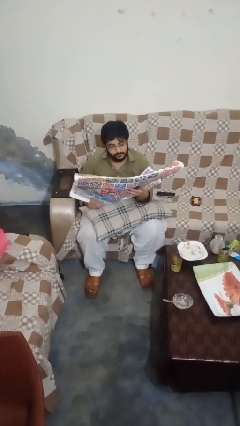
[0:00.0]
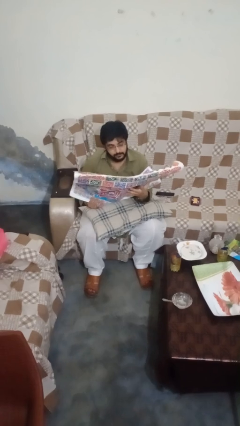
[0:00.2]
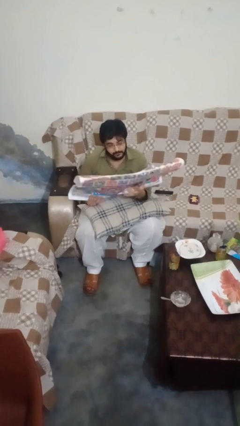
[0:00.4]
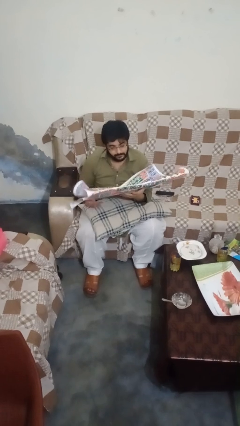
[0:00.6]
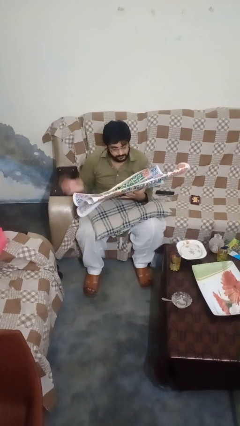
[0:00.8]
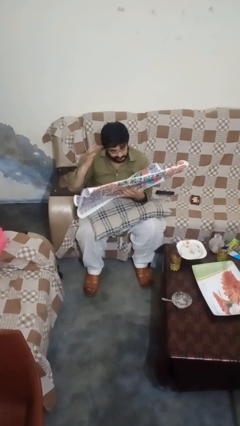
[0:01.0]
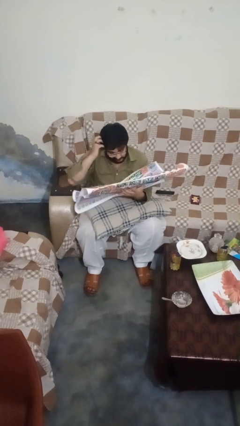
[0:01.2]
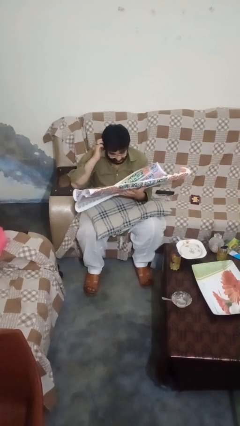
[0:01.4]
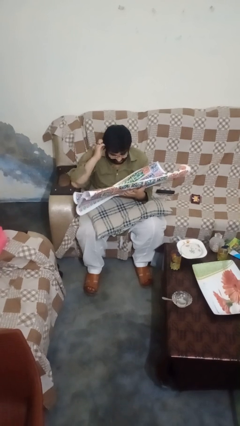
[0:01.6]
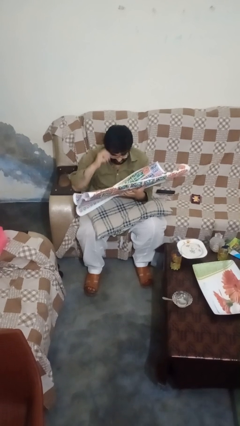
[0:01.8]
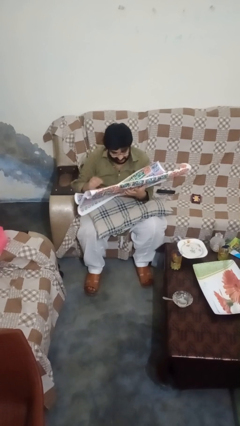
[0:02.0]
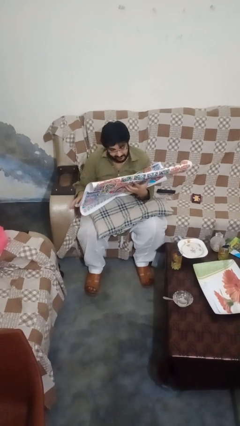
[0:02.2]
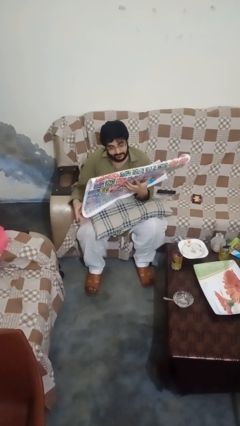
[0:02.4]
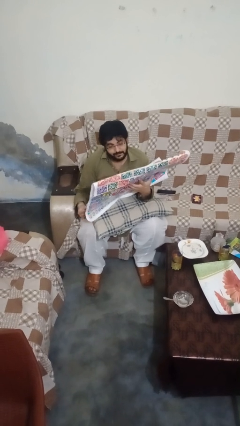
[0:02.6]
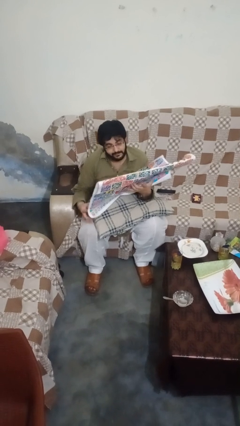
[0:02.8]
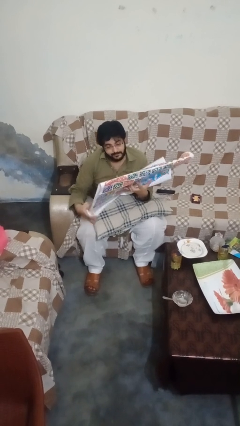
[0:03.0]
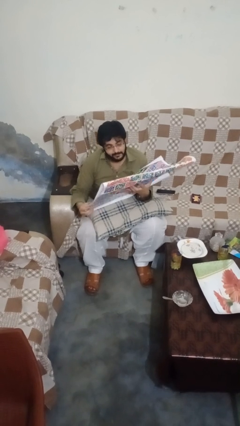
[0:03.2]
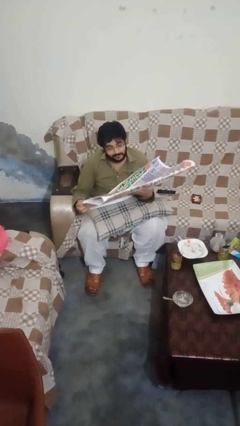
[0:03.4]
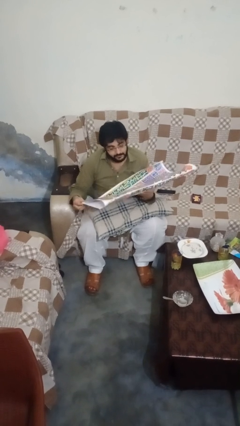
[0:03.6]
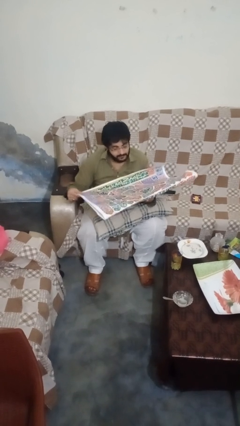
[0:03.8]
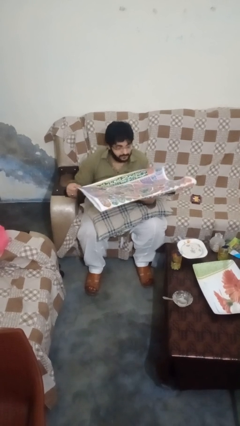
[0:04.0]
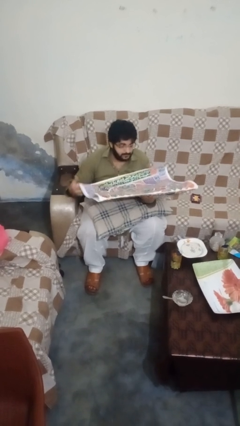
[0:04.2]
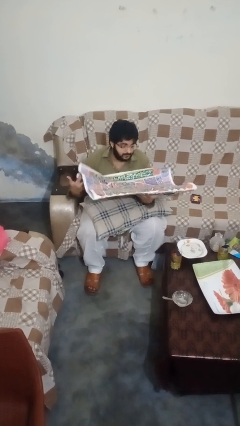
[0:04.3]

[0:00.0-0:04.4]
person reads newspaper

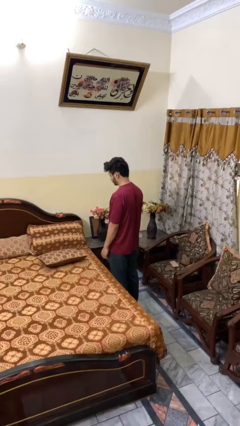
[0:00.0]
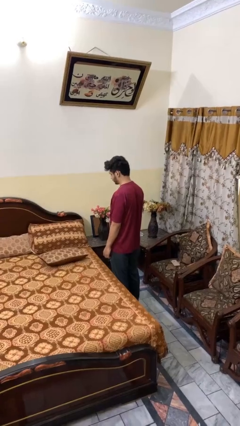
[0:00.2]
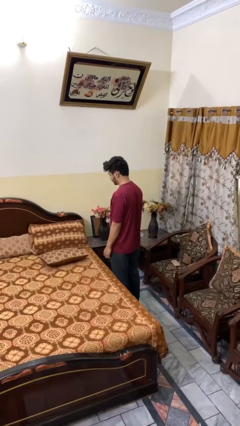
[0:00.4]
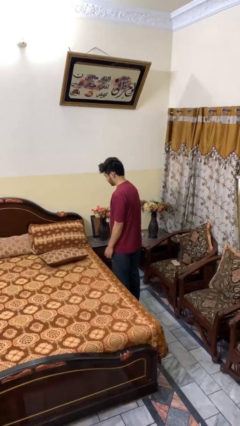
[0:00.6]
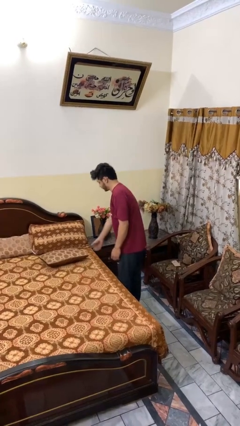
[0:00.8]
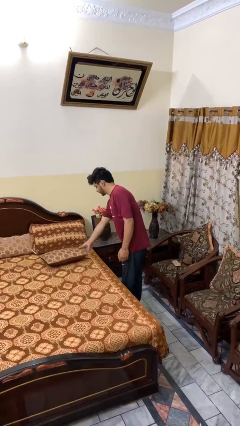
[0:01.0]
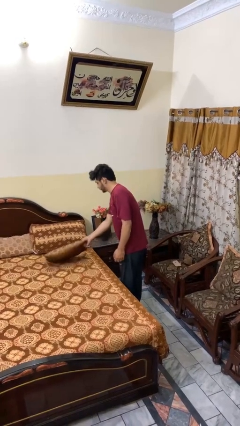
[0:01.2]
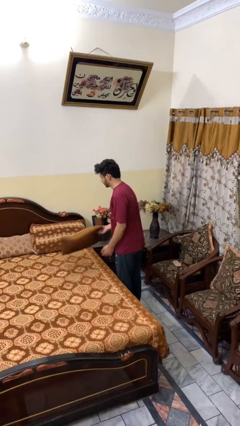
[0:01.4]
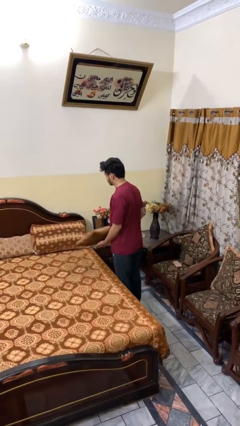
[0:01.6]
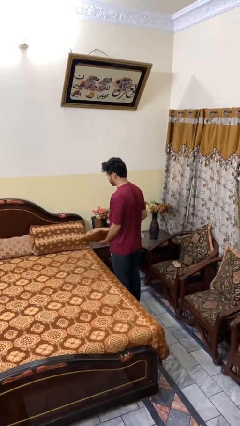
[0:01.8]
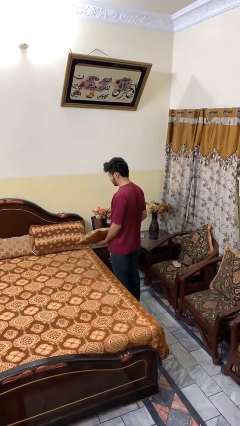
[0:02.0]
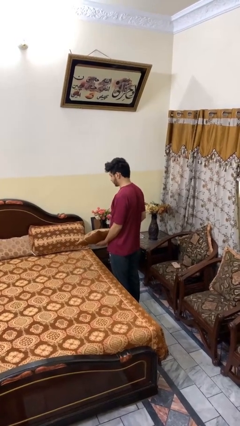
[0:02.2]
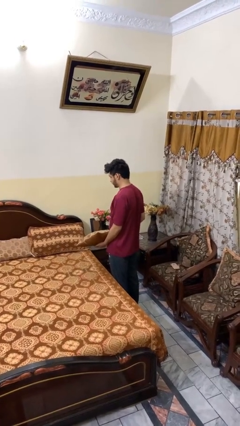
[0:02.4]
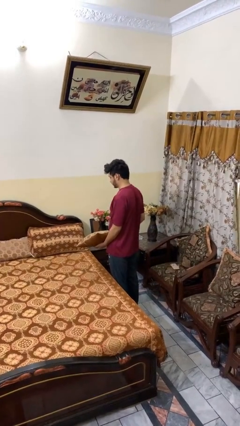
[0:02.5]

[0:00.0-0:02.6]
person picks up object from bed

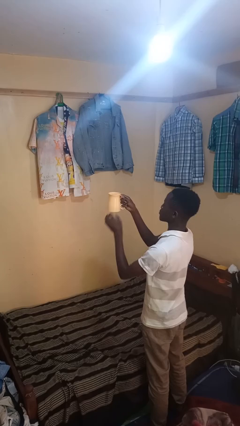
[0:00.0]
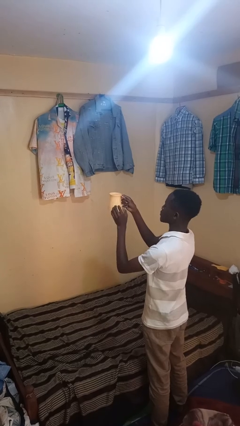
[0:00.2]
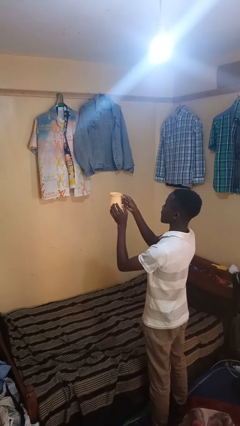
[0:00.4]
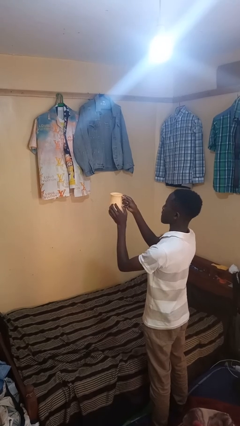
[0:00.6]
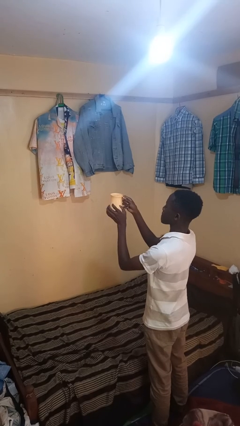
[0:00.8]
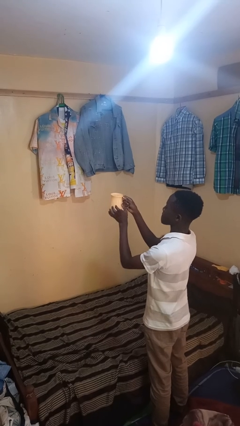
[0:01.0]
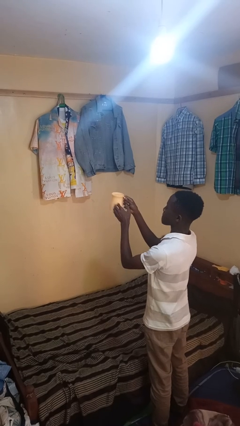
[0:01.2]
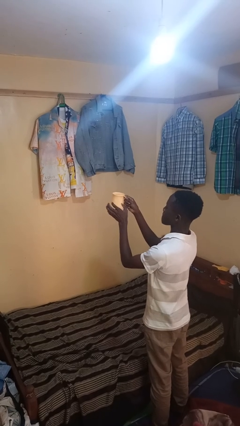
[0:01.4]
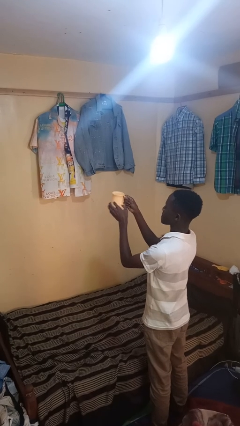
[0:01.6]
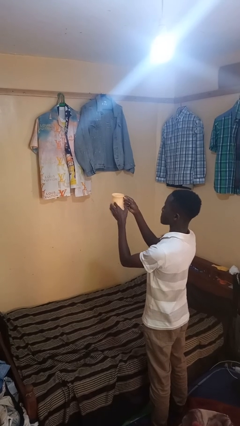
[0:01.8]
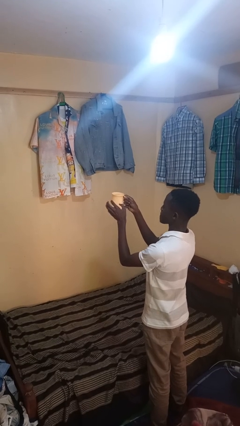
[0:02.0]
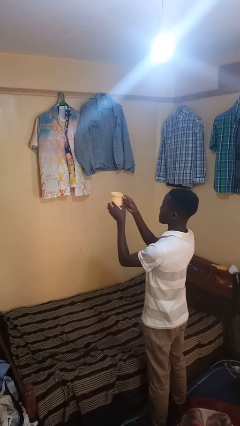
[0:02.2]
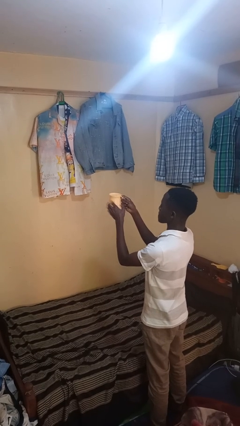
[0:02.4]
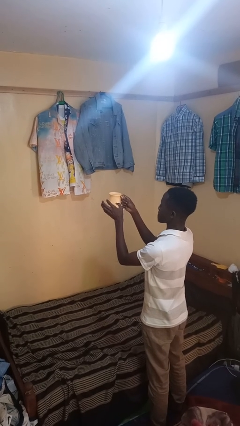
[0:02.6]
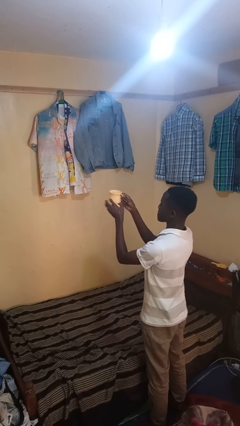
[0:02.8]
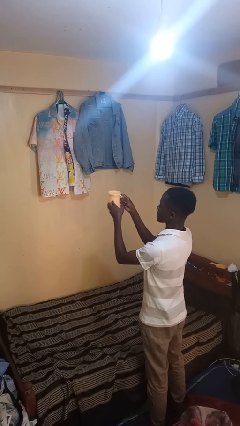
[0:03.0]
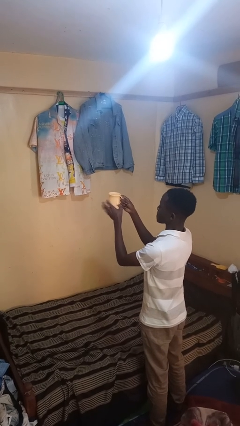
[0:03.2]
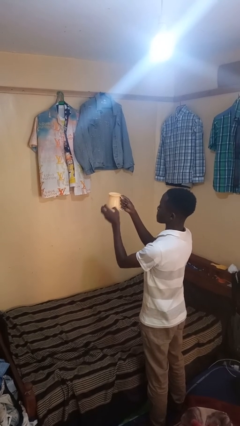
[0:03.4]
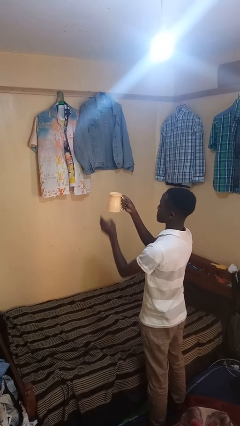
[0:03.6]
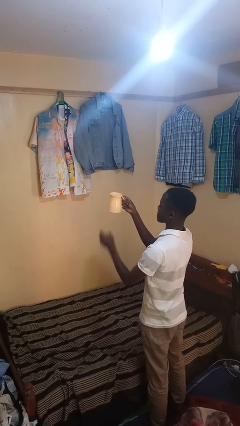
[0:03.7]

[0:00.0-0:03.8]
person taps object with finger

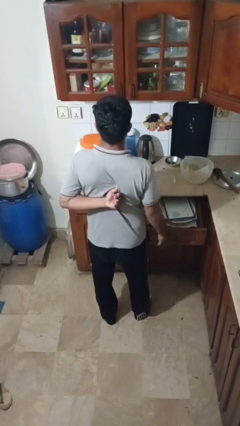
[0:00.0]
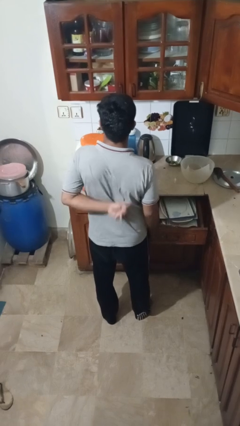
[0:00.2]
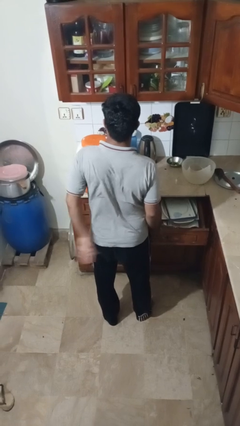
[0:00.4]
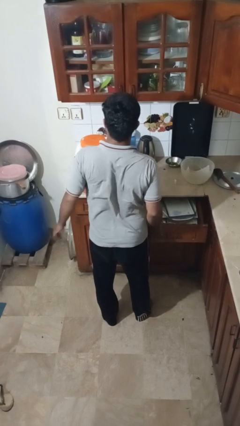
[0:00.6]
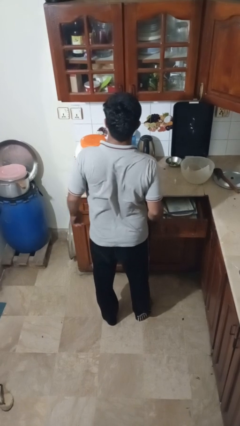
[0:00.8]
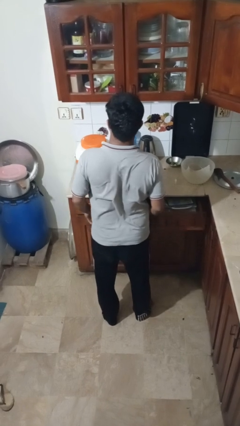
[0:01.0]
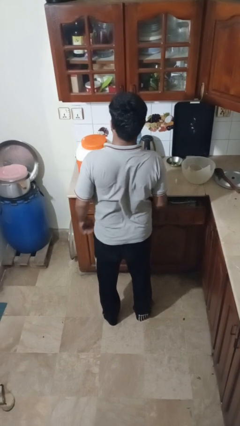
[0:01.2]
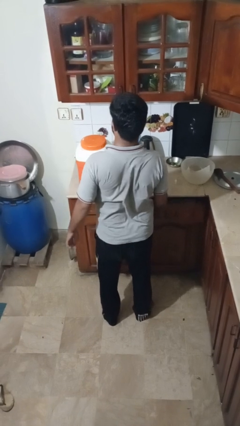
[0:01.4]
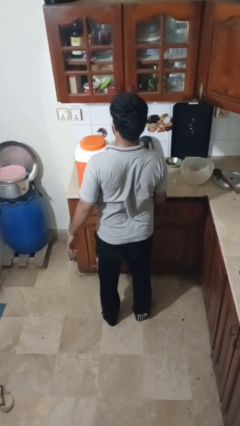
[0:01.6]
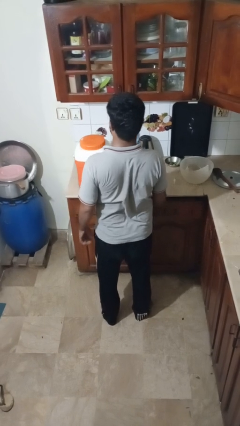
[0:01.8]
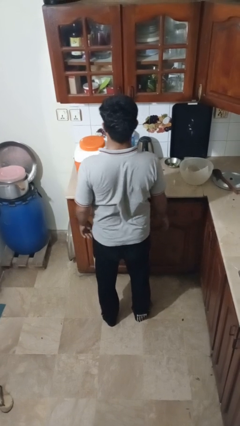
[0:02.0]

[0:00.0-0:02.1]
person closes kitchen drawer

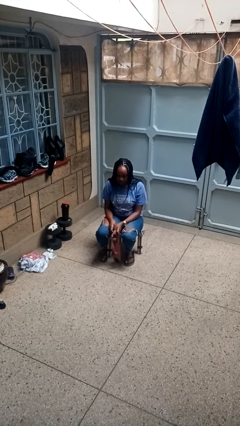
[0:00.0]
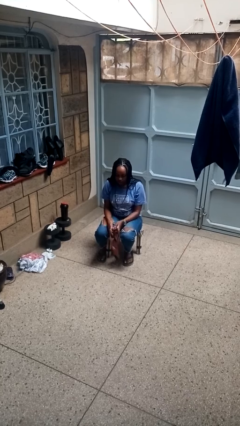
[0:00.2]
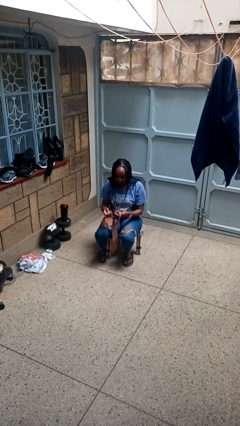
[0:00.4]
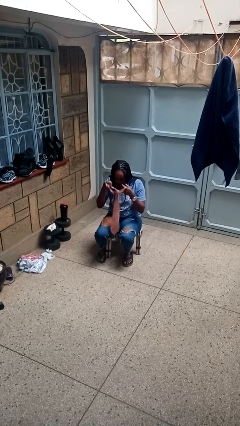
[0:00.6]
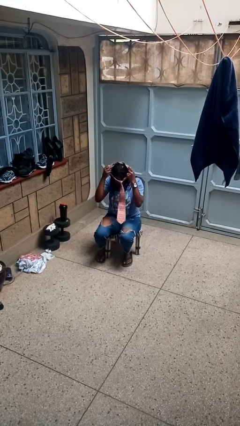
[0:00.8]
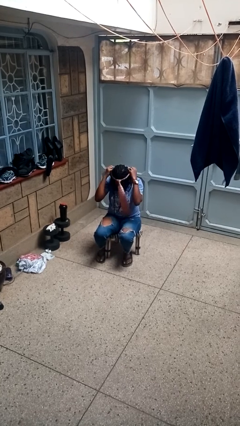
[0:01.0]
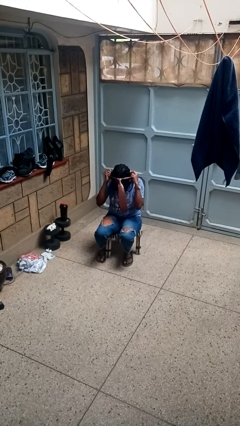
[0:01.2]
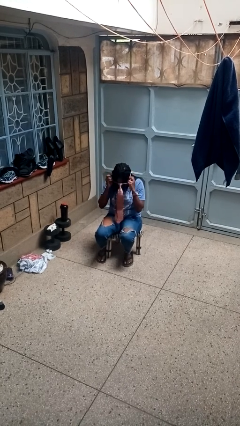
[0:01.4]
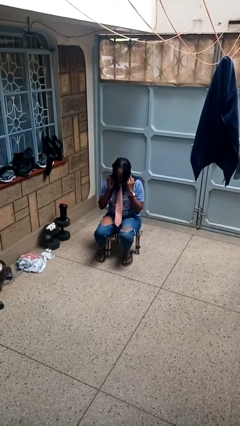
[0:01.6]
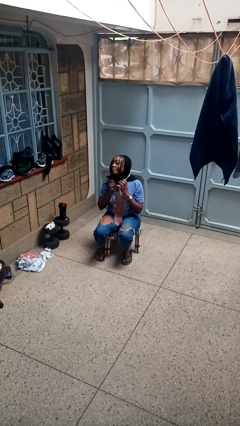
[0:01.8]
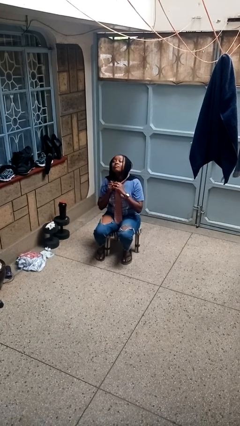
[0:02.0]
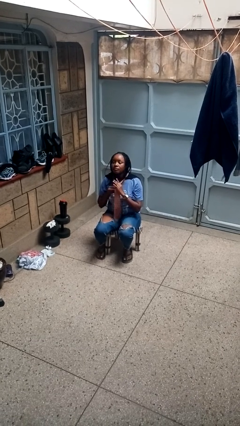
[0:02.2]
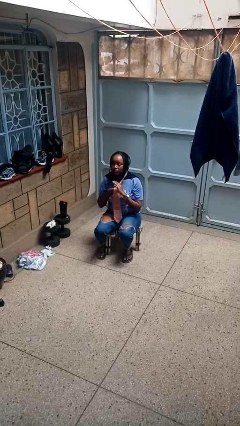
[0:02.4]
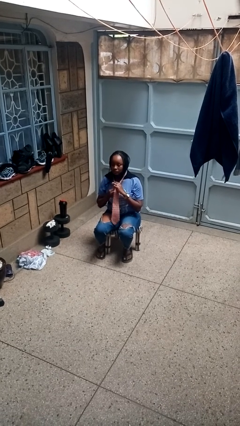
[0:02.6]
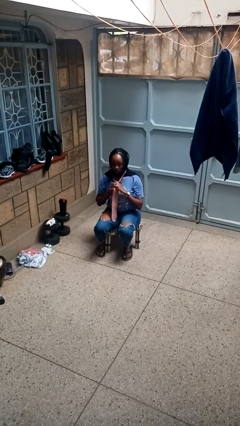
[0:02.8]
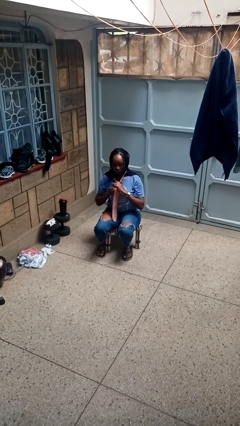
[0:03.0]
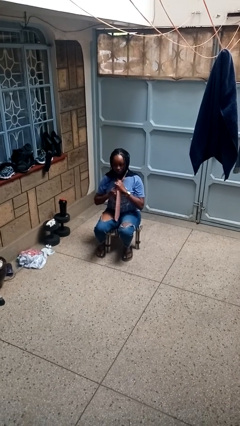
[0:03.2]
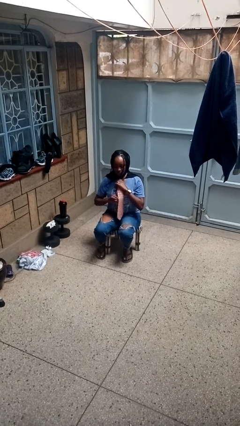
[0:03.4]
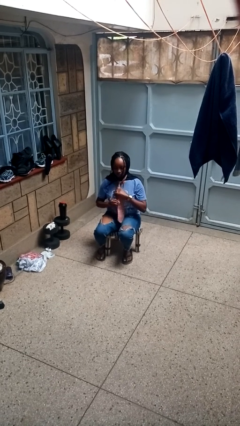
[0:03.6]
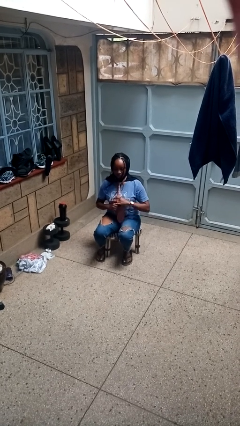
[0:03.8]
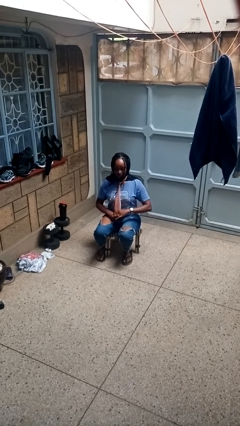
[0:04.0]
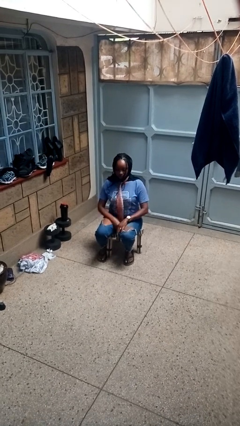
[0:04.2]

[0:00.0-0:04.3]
person puts on necktie
